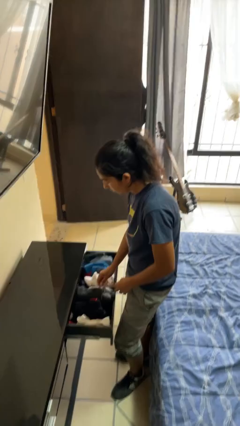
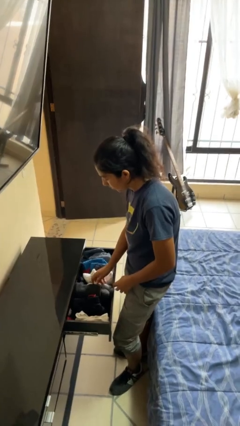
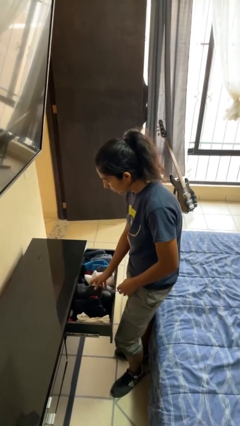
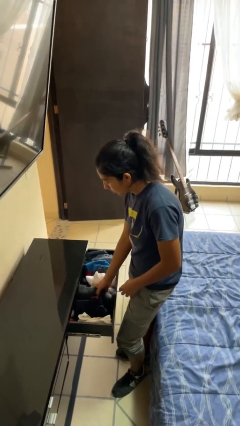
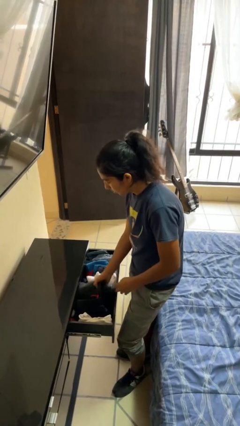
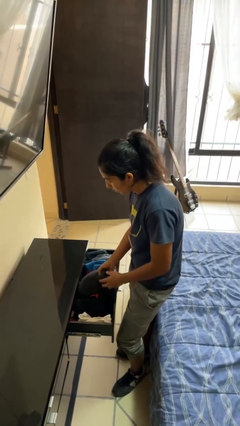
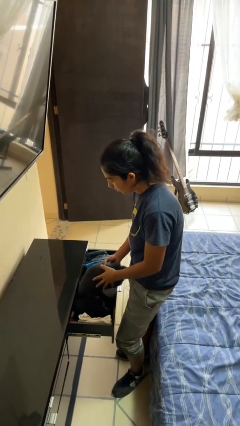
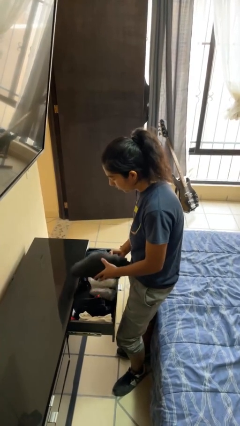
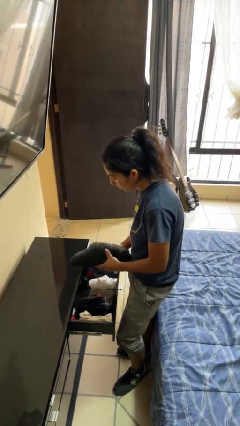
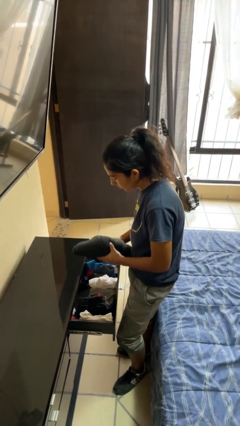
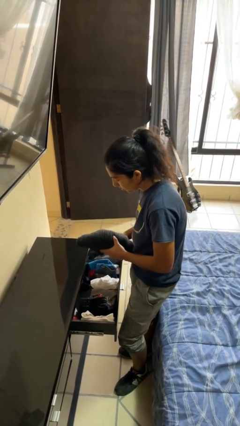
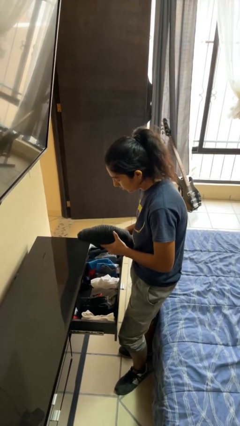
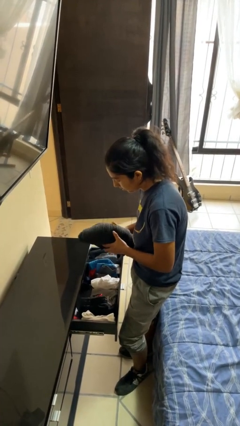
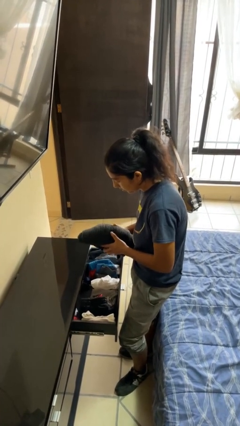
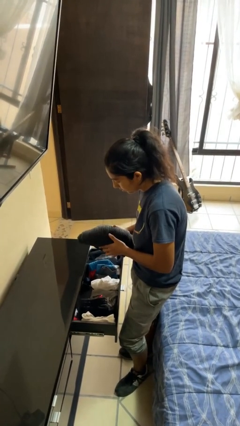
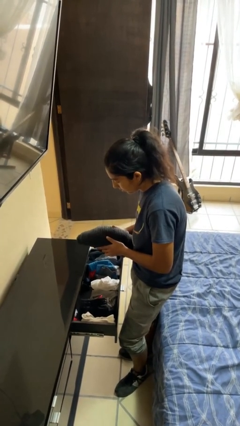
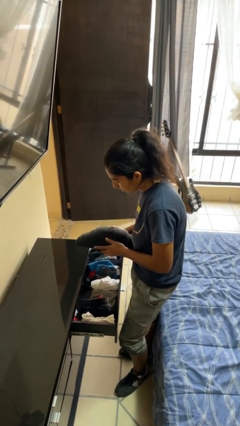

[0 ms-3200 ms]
person takes clothes from dresser

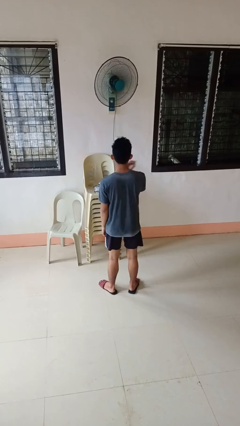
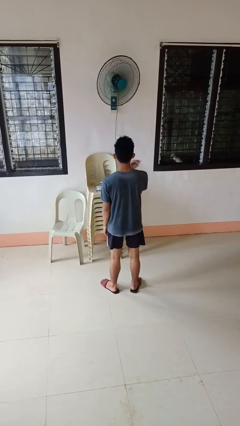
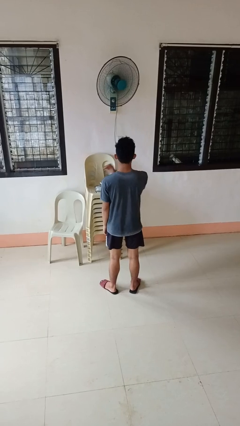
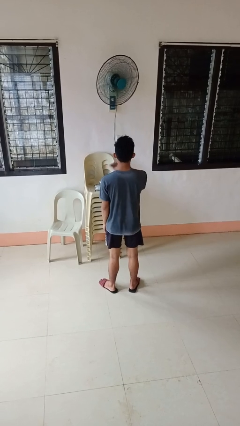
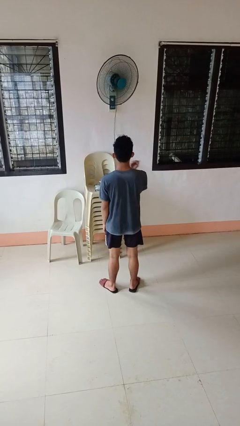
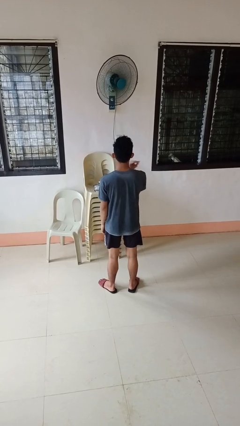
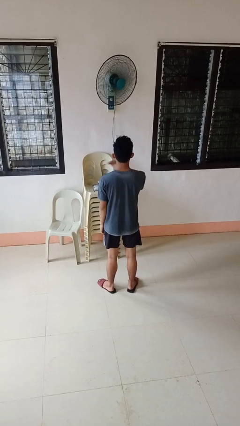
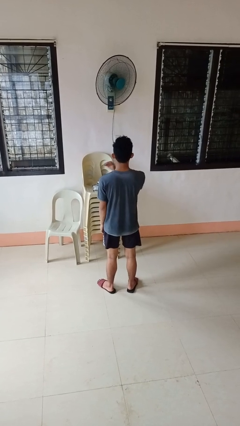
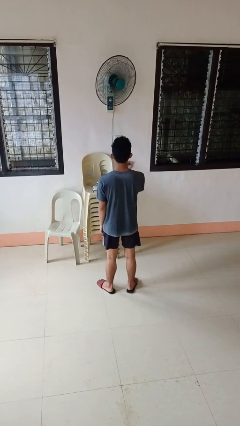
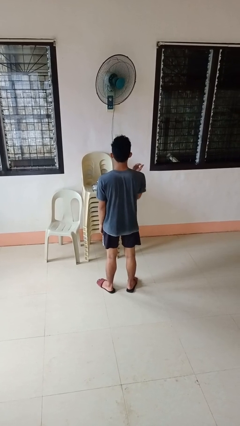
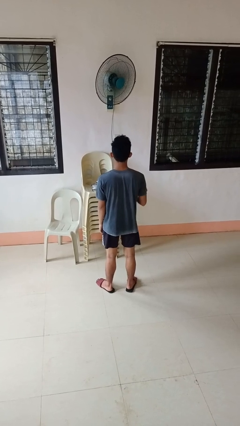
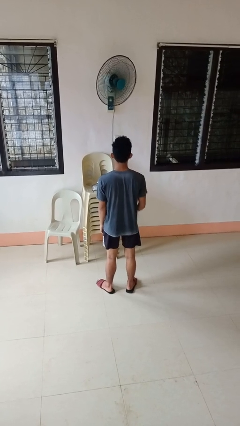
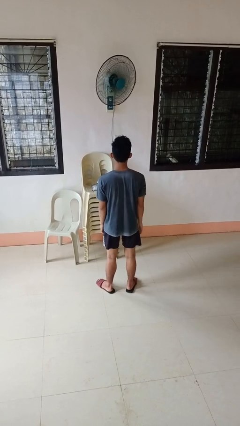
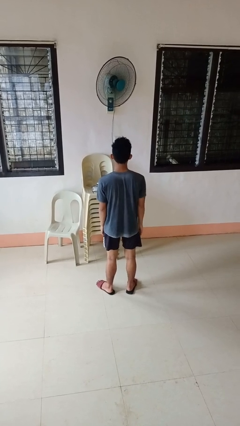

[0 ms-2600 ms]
person gestures cut

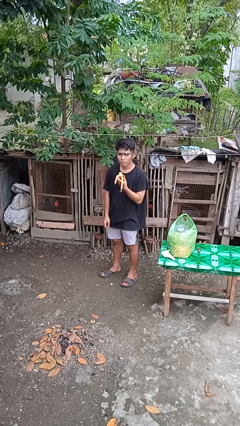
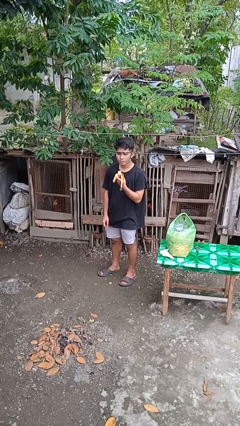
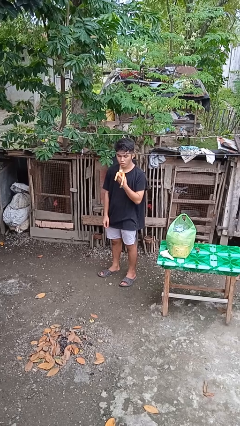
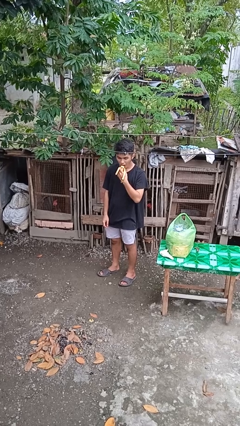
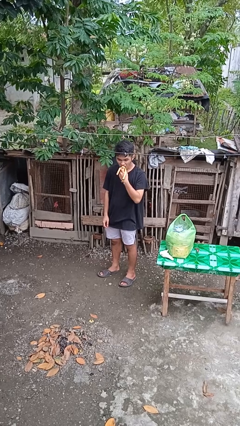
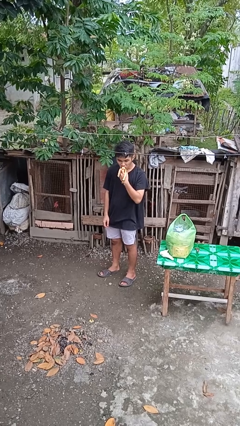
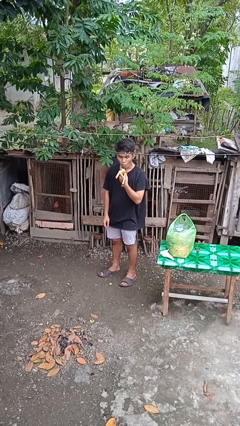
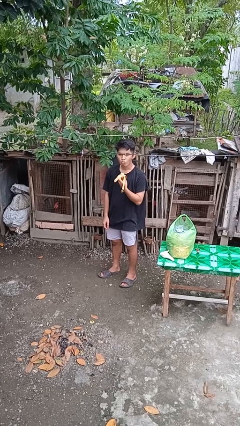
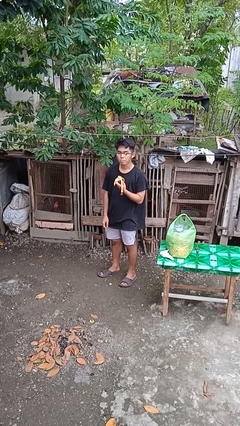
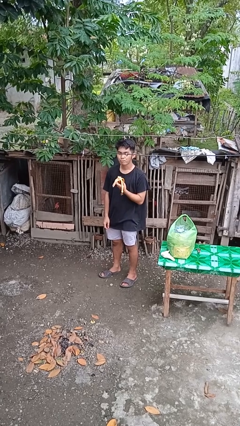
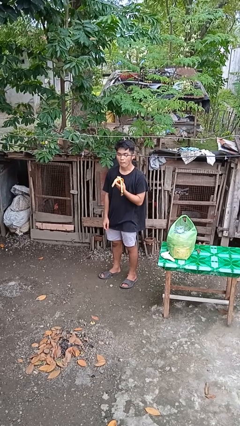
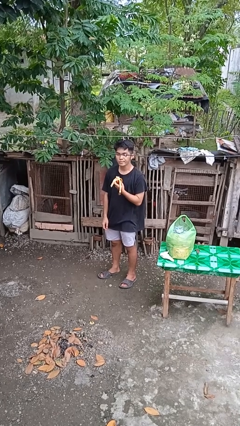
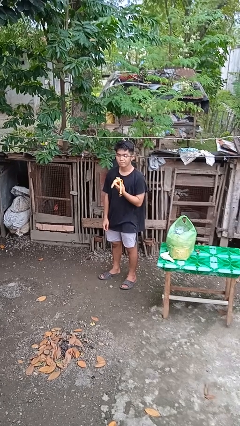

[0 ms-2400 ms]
person eats banana

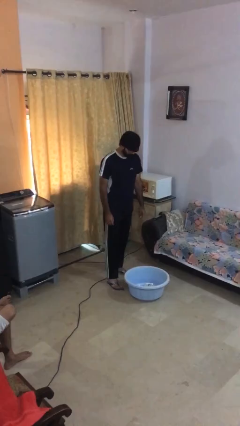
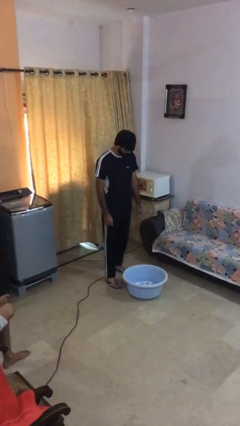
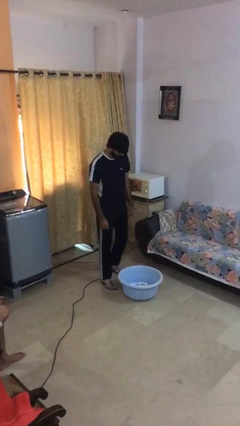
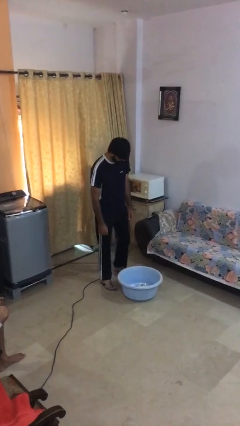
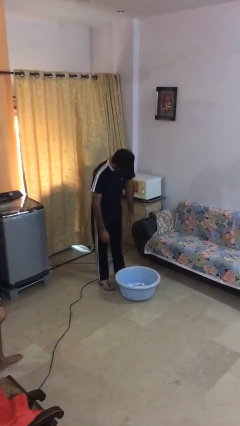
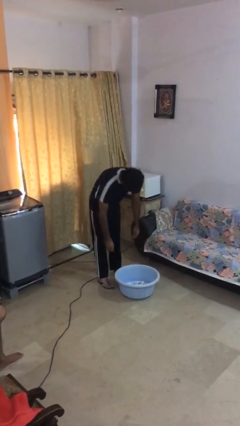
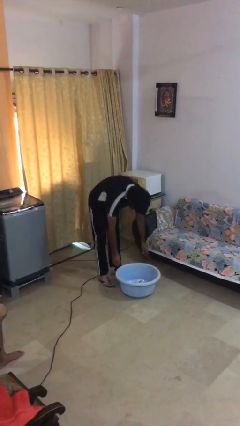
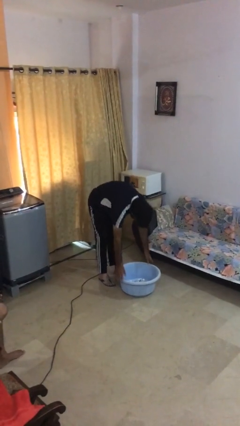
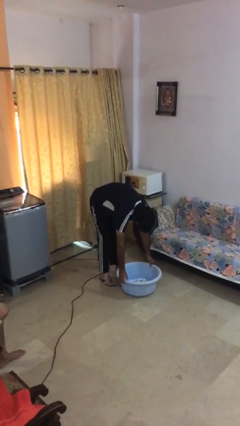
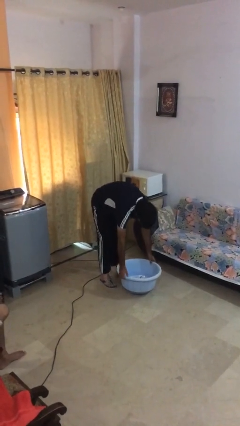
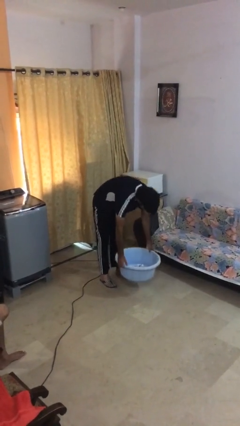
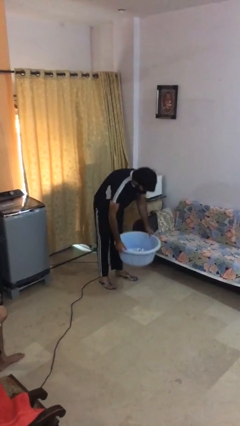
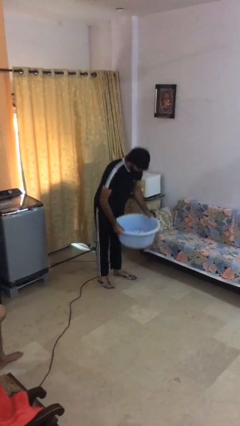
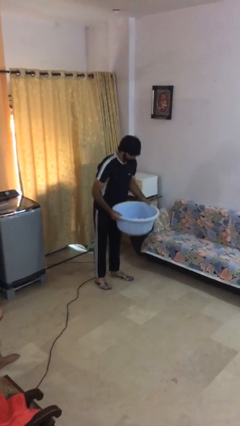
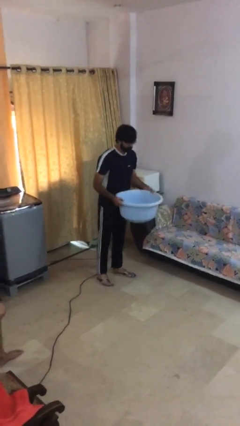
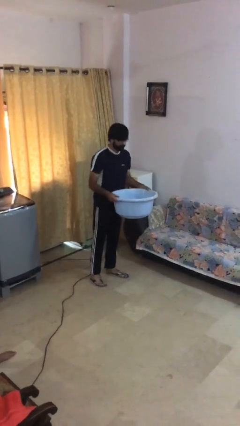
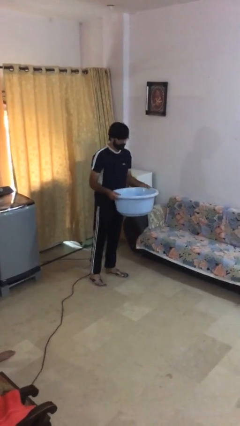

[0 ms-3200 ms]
person picks up object from floor

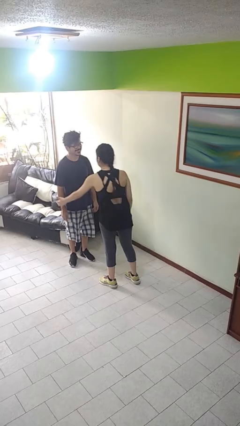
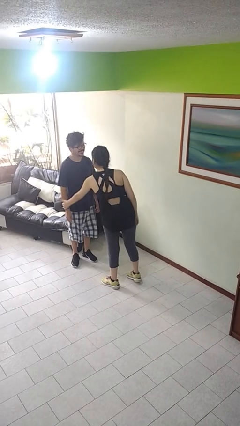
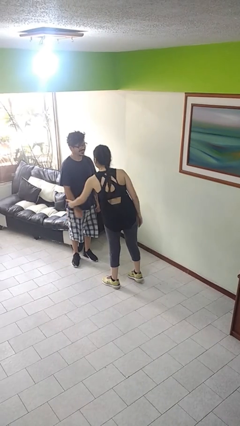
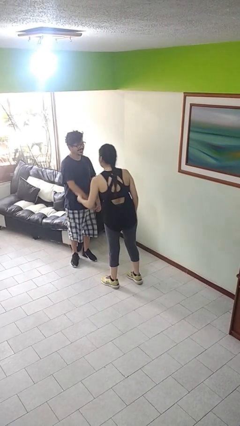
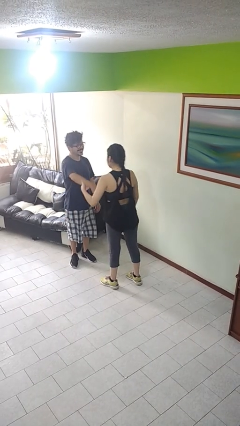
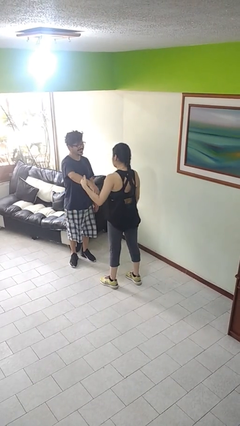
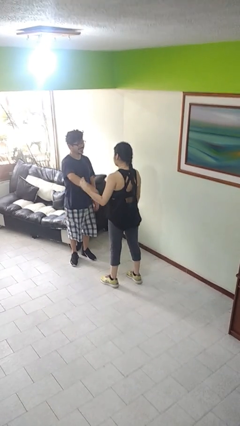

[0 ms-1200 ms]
person grabs person by forearm

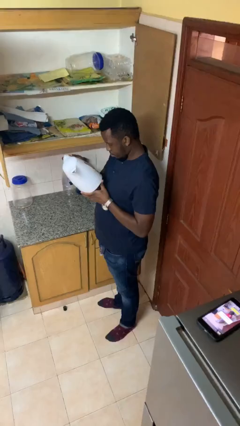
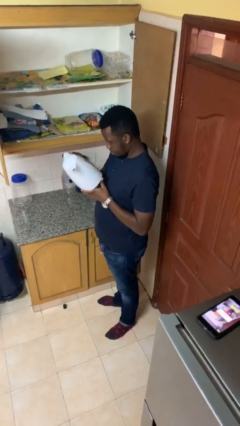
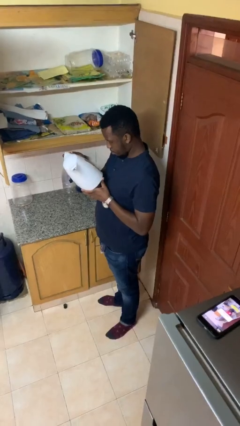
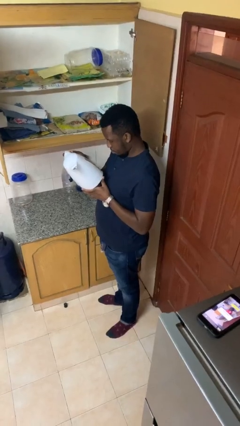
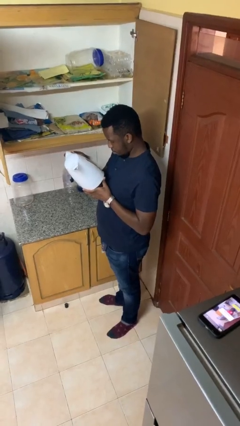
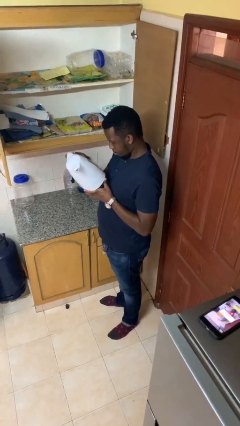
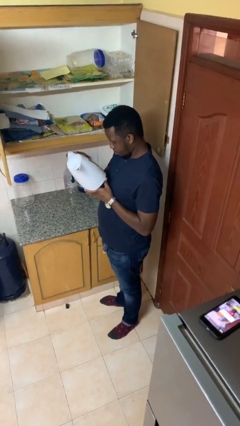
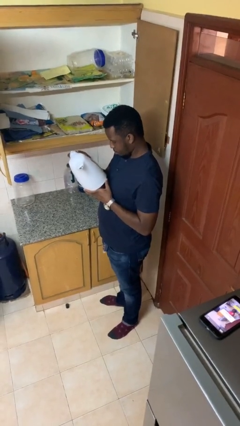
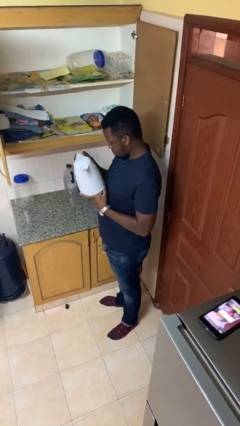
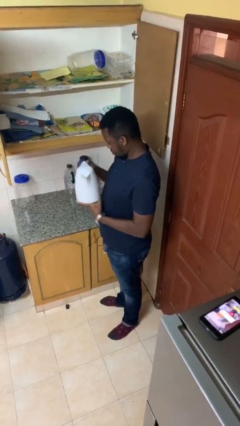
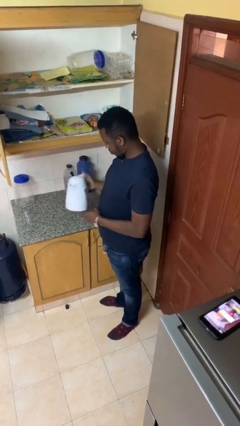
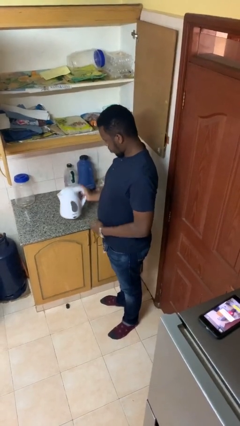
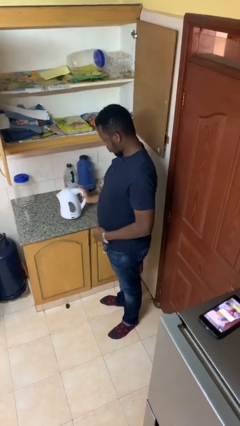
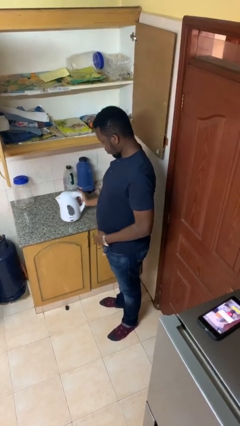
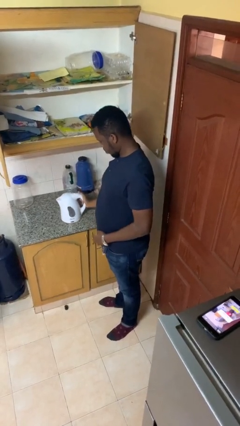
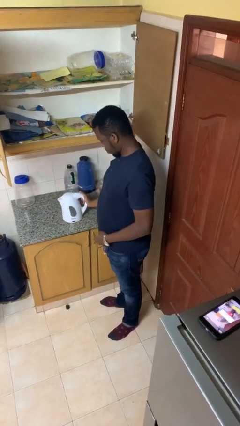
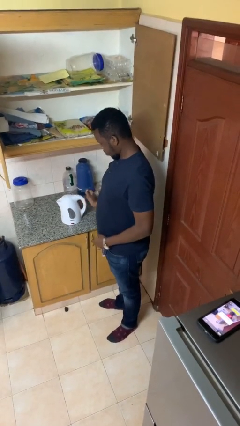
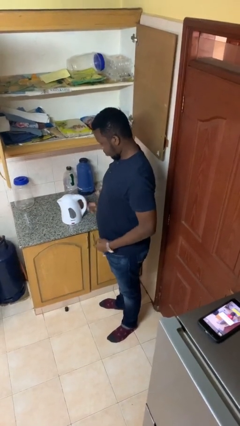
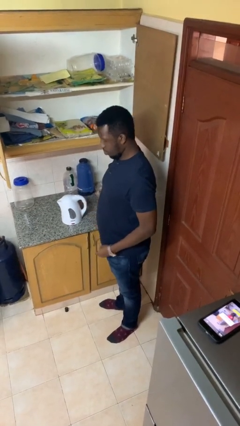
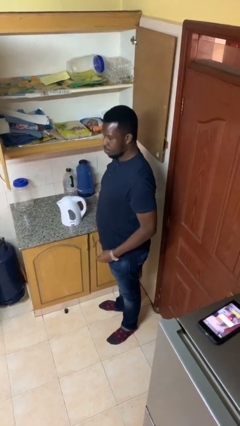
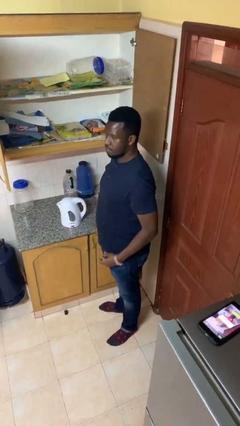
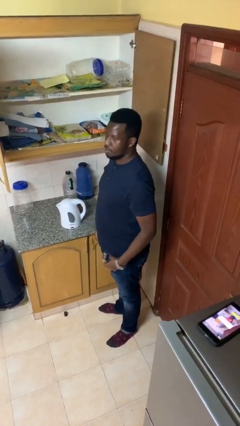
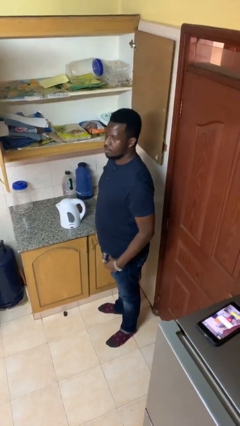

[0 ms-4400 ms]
person puts down object on table

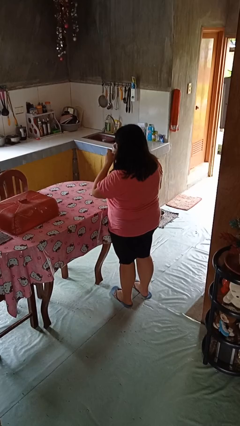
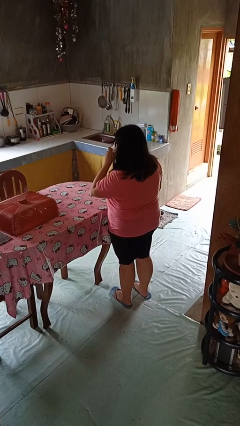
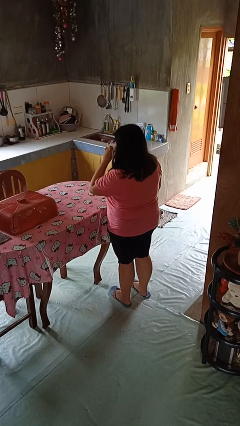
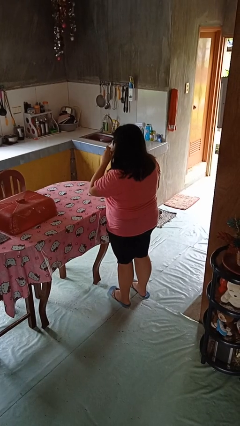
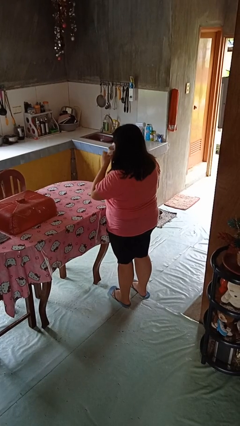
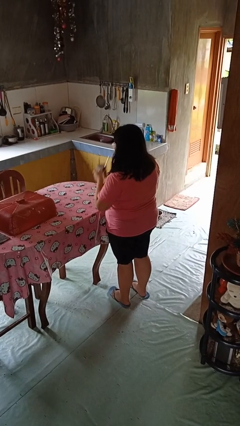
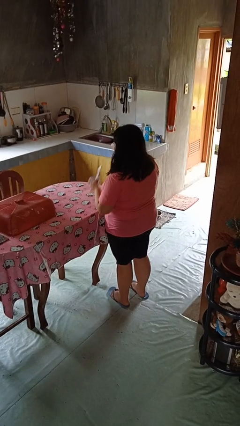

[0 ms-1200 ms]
person drinks from mug
